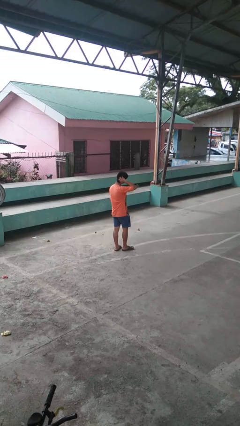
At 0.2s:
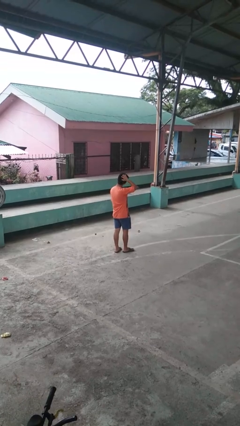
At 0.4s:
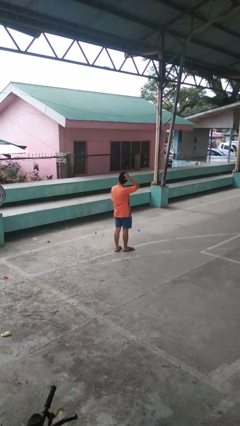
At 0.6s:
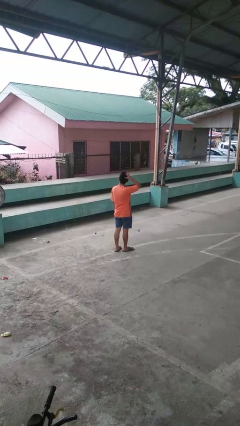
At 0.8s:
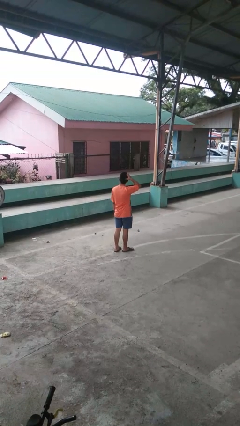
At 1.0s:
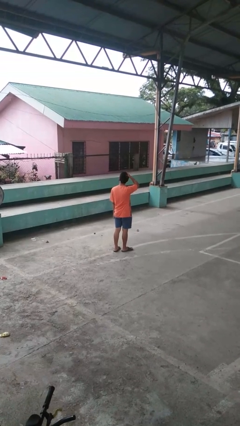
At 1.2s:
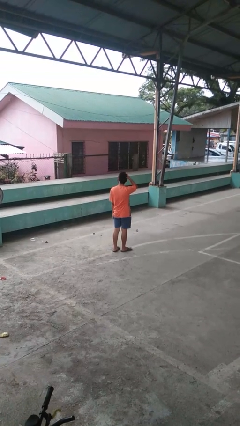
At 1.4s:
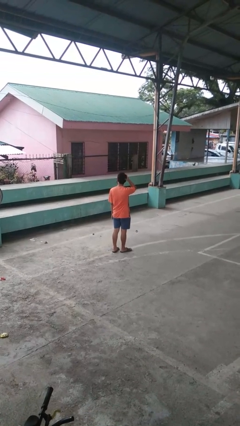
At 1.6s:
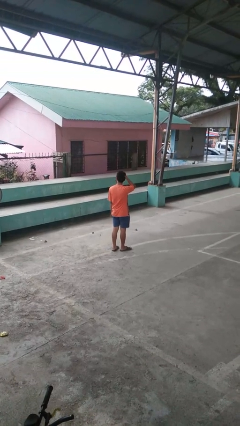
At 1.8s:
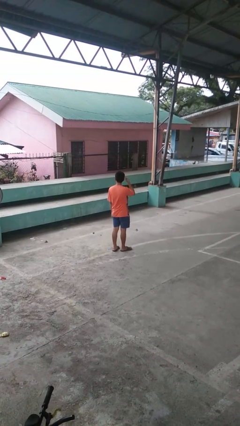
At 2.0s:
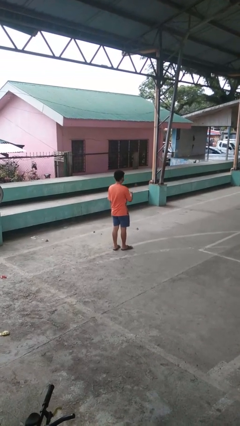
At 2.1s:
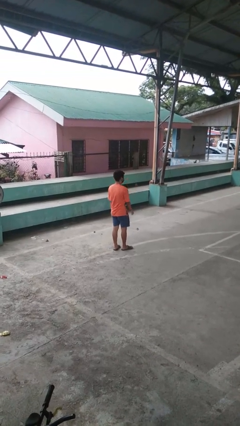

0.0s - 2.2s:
person scratches face

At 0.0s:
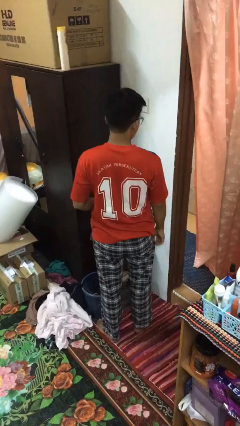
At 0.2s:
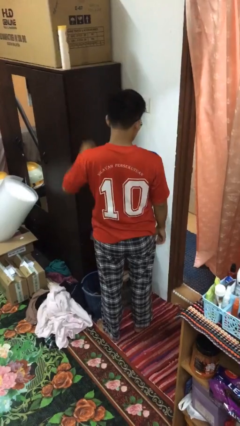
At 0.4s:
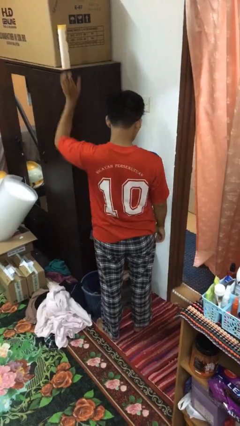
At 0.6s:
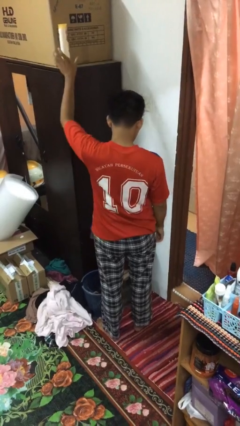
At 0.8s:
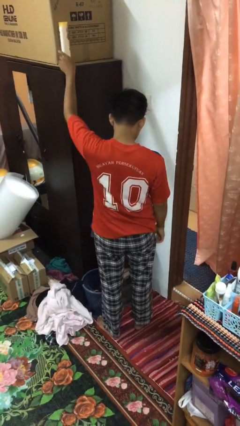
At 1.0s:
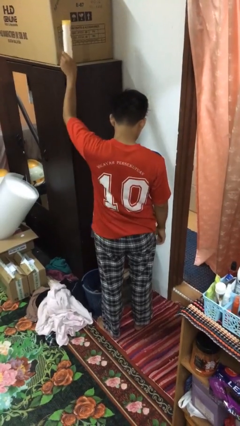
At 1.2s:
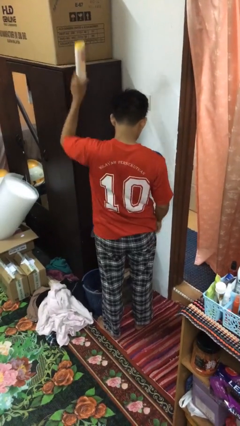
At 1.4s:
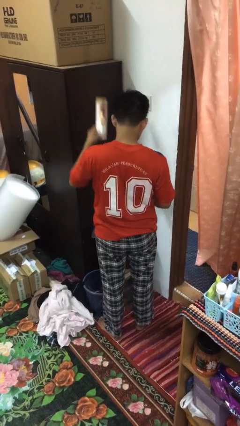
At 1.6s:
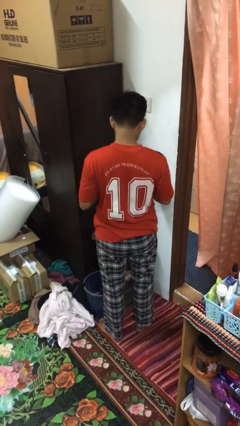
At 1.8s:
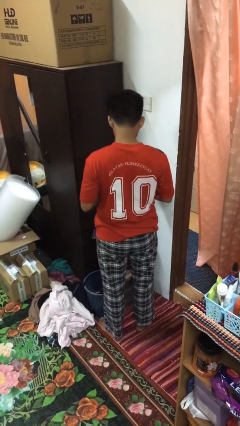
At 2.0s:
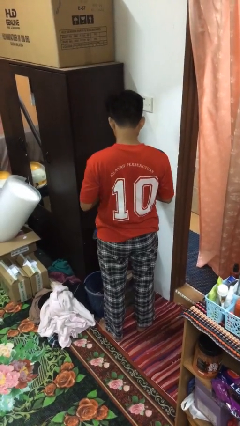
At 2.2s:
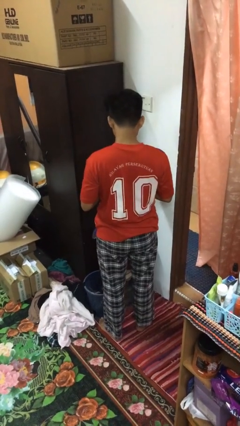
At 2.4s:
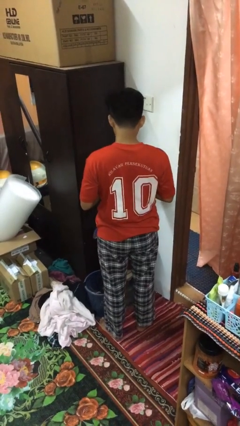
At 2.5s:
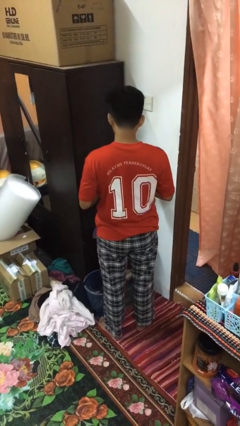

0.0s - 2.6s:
person picks up object from shelf

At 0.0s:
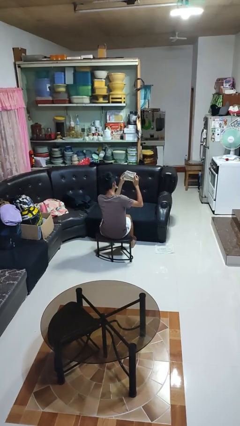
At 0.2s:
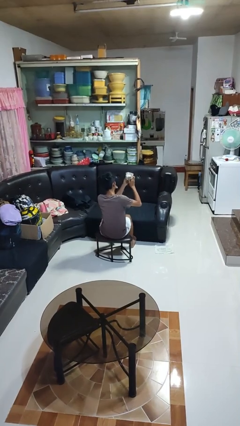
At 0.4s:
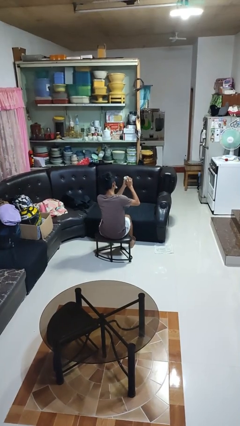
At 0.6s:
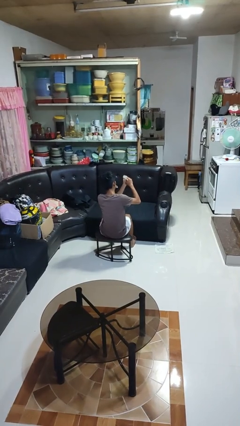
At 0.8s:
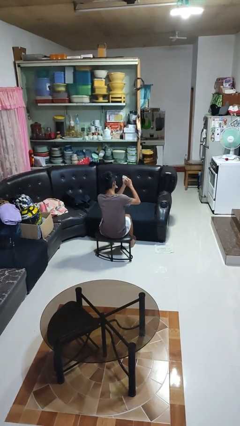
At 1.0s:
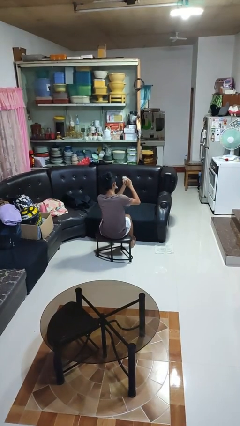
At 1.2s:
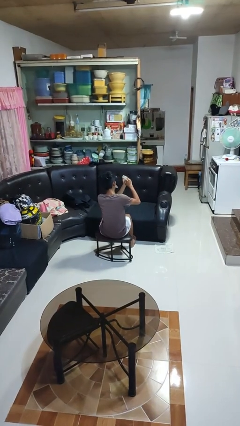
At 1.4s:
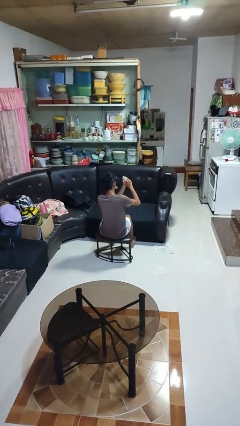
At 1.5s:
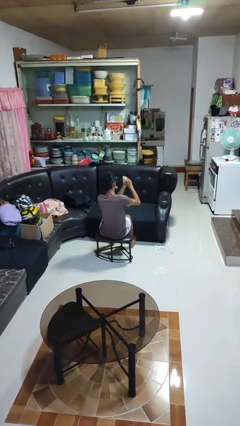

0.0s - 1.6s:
person crumples paper

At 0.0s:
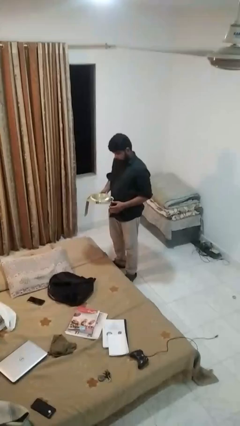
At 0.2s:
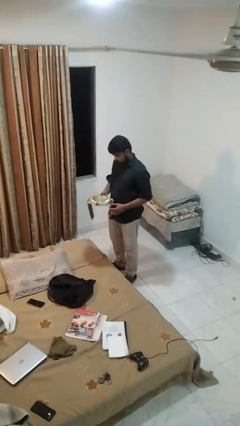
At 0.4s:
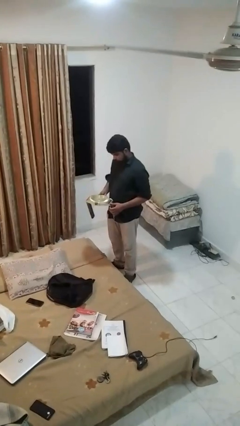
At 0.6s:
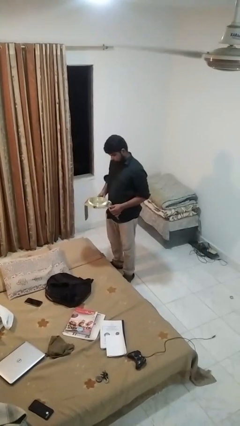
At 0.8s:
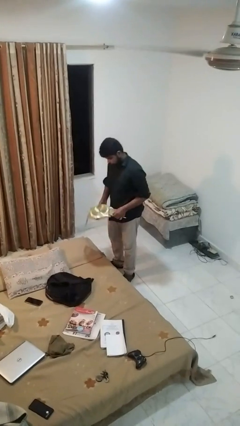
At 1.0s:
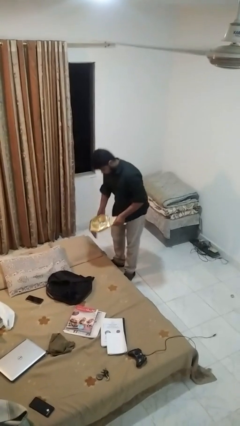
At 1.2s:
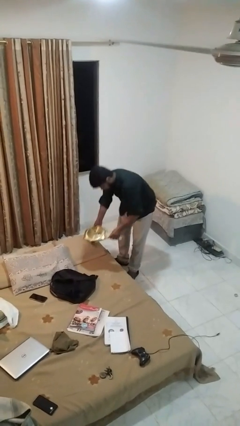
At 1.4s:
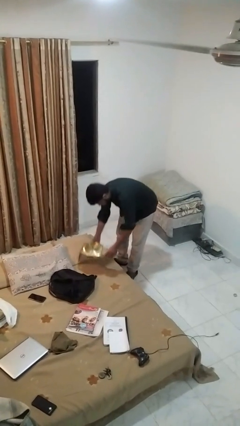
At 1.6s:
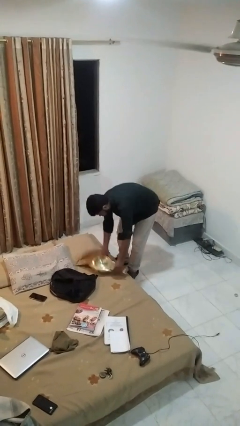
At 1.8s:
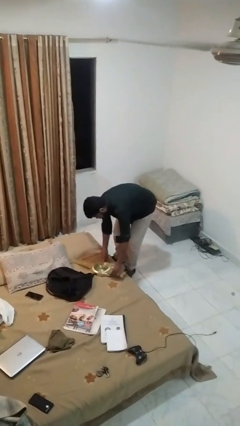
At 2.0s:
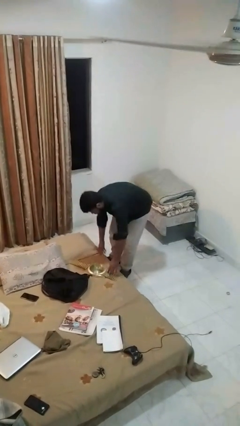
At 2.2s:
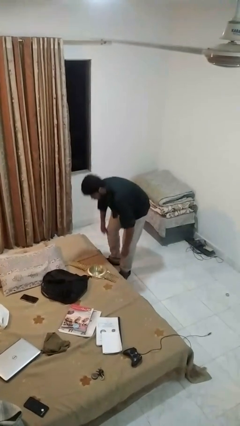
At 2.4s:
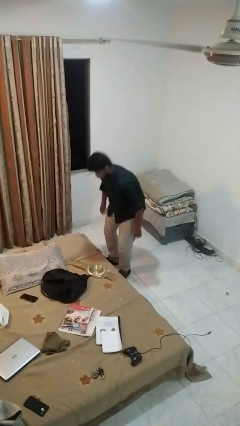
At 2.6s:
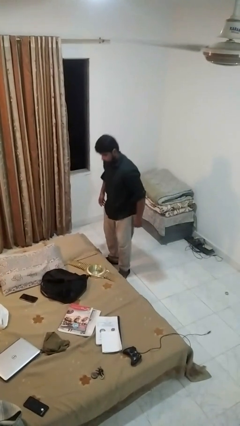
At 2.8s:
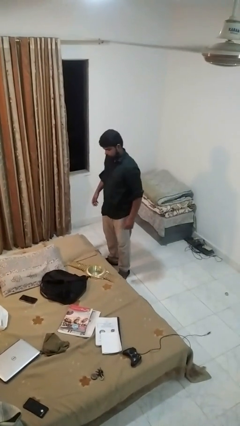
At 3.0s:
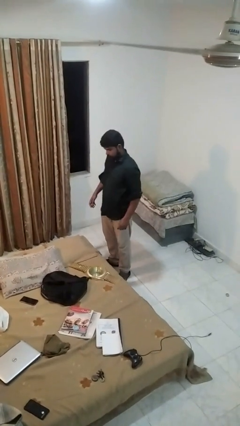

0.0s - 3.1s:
person puts down object on bed

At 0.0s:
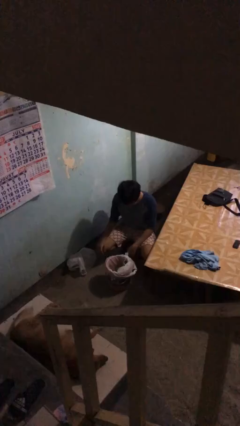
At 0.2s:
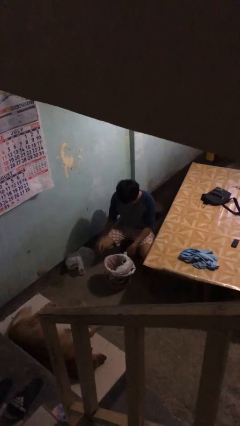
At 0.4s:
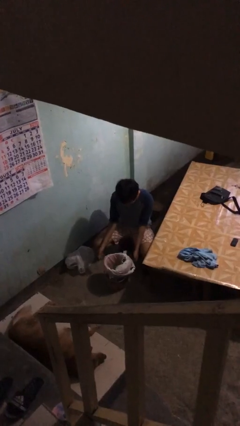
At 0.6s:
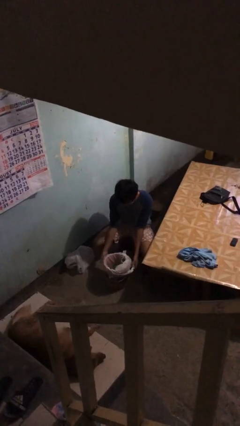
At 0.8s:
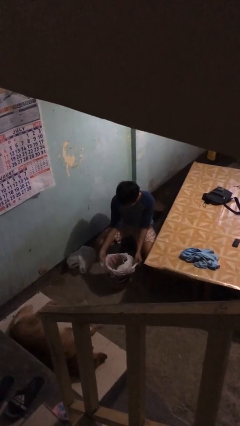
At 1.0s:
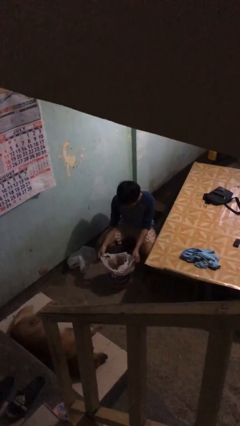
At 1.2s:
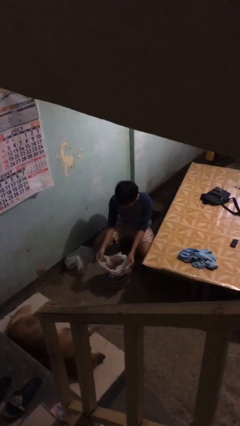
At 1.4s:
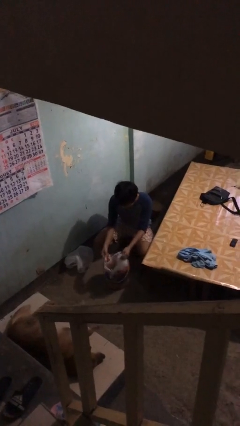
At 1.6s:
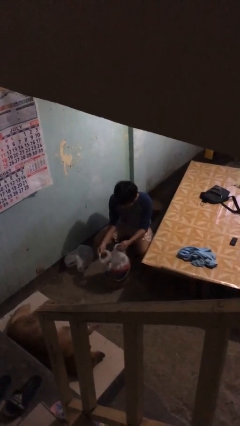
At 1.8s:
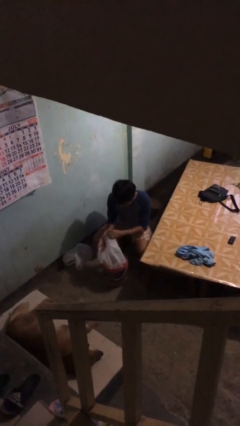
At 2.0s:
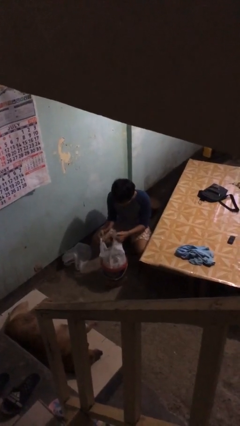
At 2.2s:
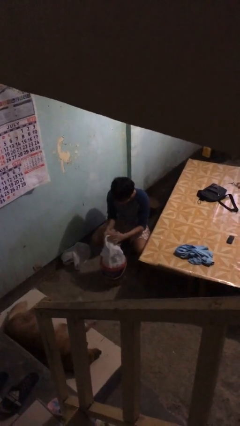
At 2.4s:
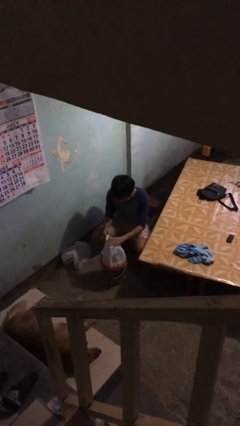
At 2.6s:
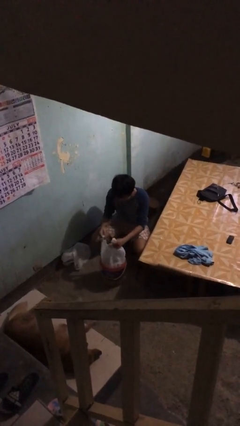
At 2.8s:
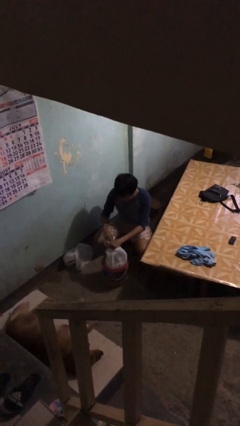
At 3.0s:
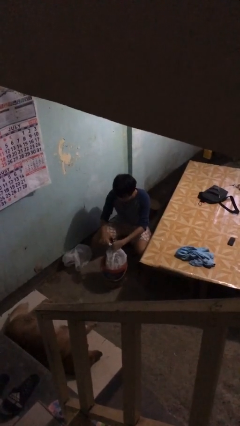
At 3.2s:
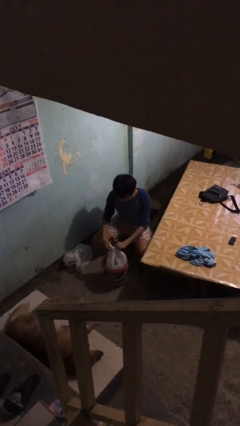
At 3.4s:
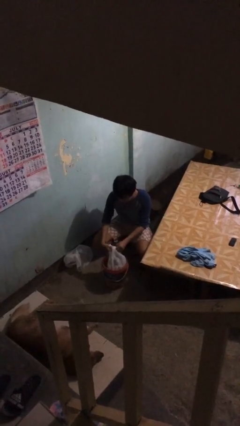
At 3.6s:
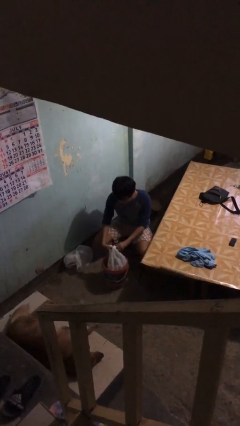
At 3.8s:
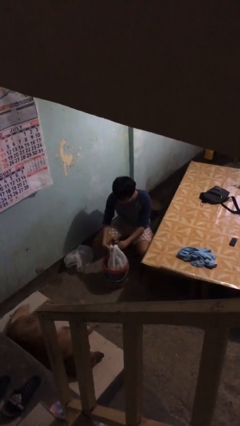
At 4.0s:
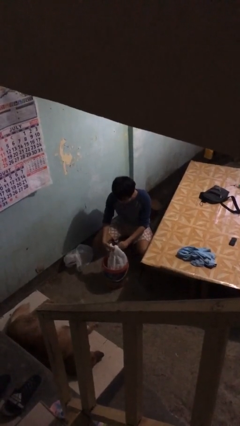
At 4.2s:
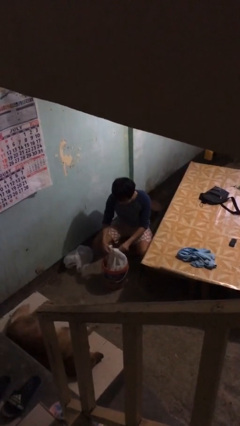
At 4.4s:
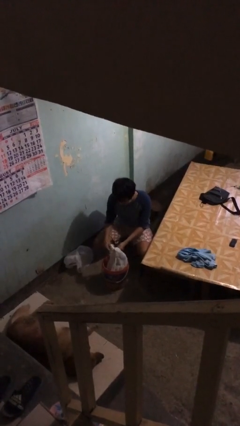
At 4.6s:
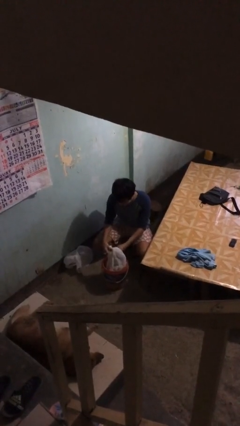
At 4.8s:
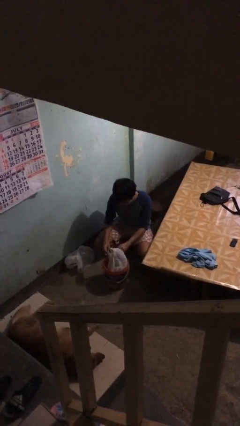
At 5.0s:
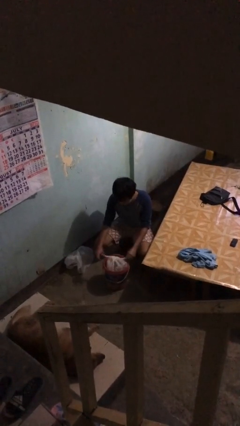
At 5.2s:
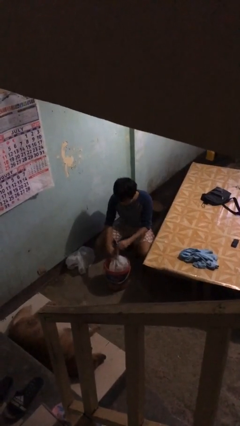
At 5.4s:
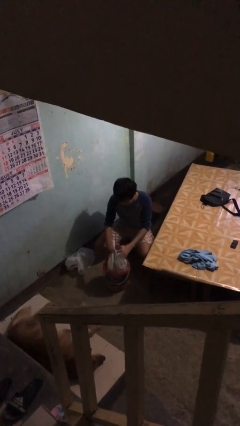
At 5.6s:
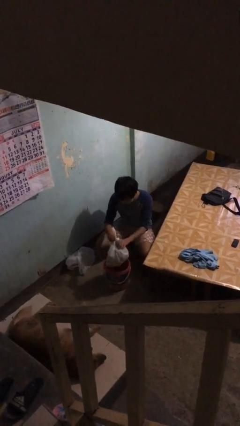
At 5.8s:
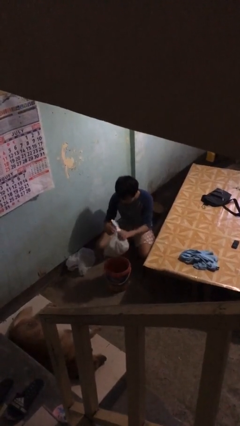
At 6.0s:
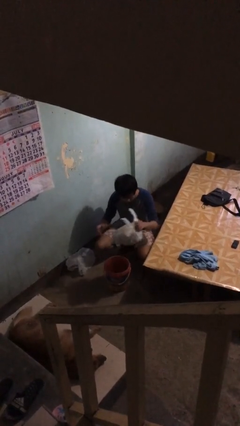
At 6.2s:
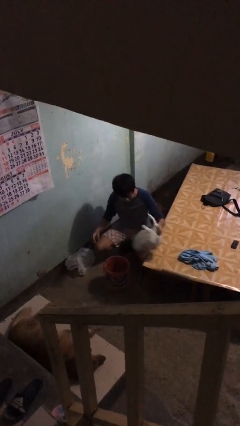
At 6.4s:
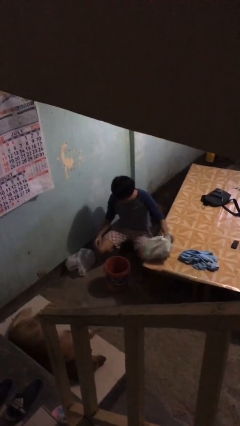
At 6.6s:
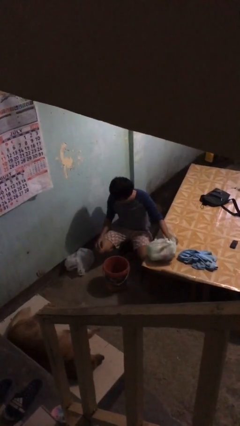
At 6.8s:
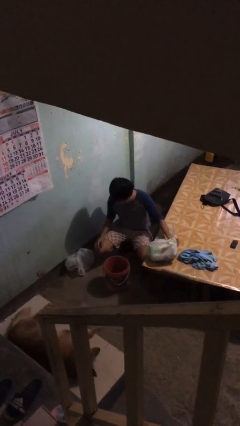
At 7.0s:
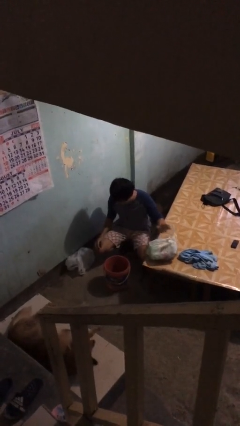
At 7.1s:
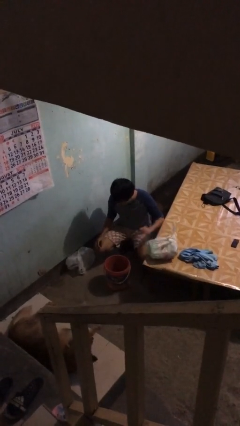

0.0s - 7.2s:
person removes trashbag from trashcan

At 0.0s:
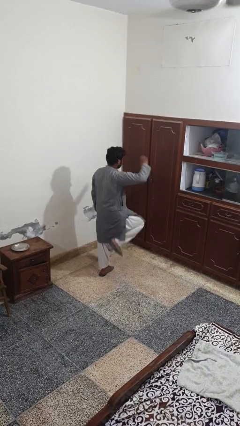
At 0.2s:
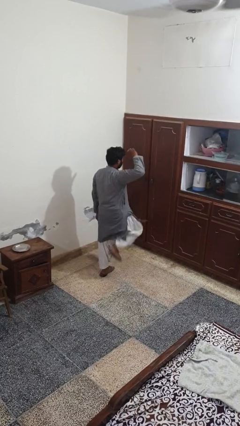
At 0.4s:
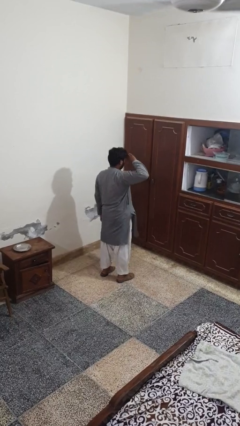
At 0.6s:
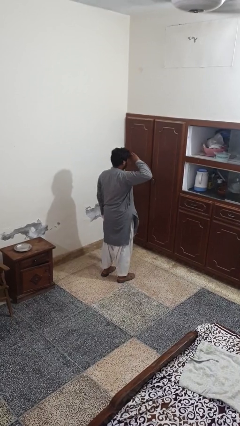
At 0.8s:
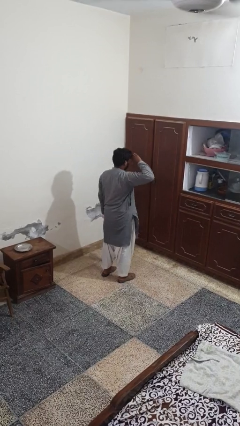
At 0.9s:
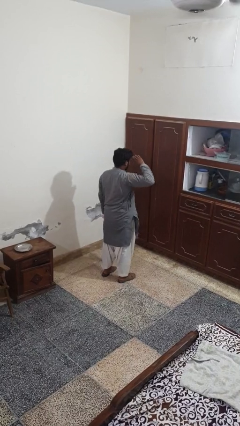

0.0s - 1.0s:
person salutes
